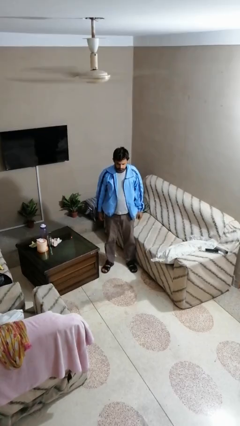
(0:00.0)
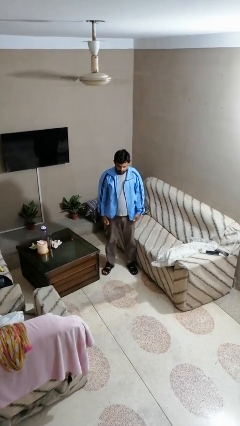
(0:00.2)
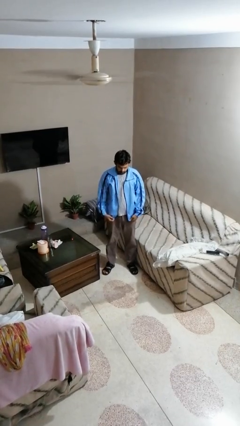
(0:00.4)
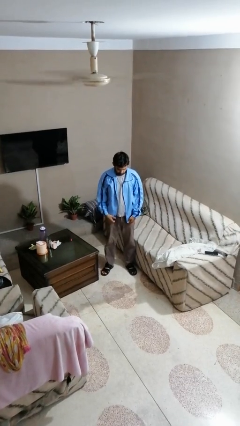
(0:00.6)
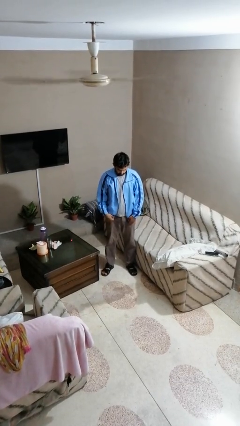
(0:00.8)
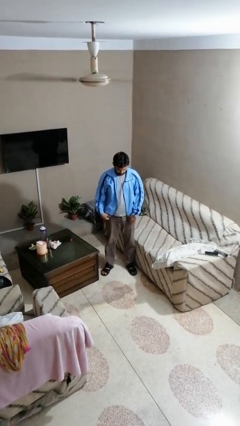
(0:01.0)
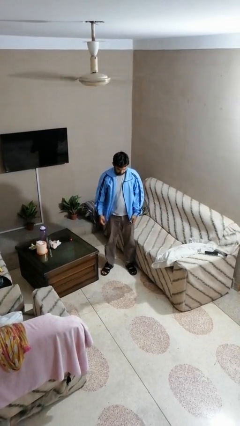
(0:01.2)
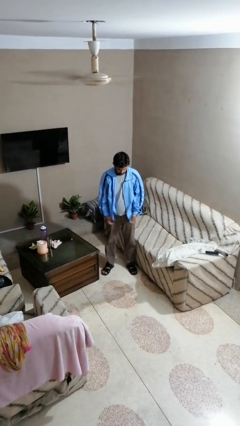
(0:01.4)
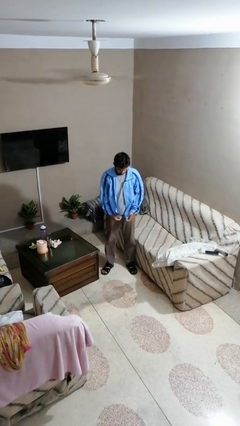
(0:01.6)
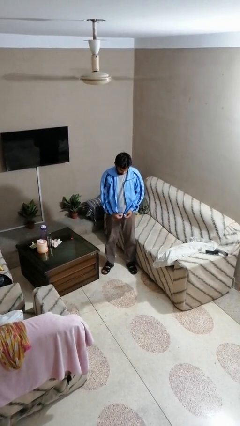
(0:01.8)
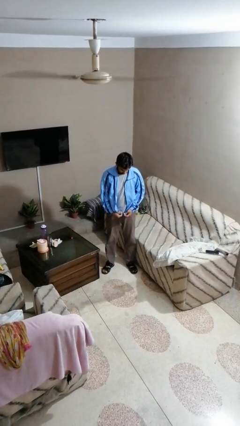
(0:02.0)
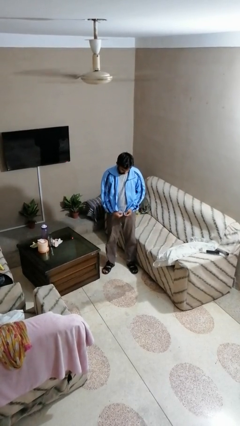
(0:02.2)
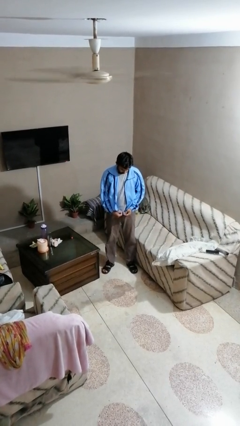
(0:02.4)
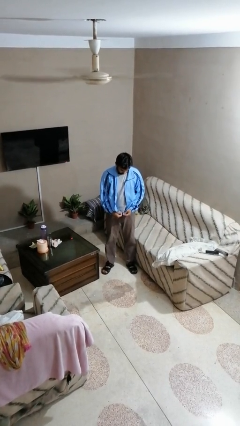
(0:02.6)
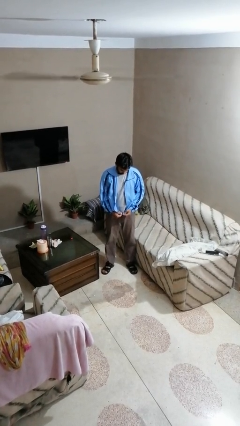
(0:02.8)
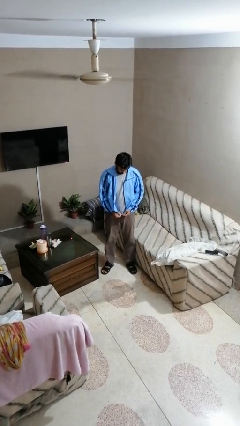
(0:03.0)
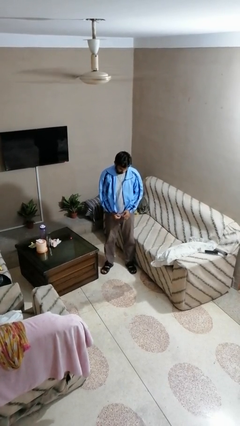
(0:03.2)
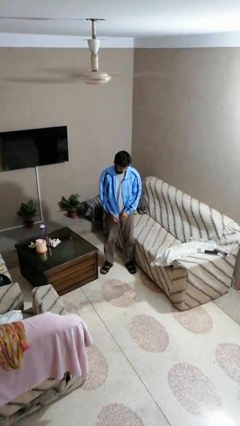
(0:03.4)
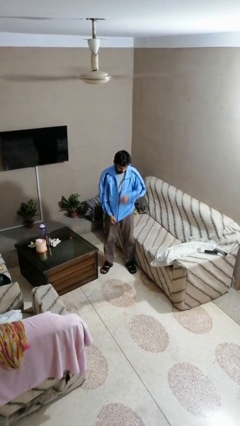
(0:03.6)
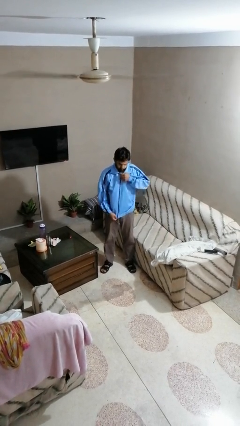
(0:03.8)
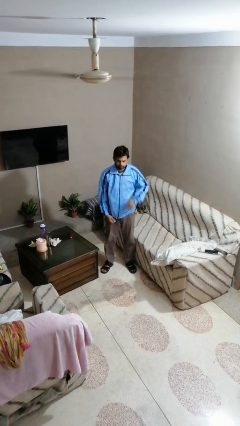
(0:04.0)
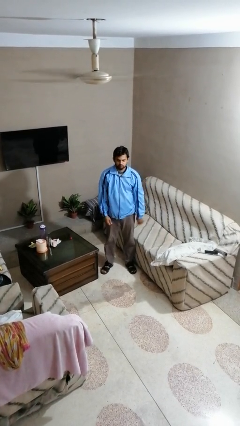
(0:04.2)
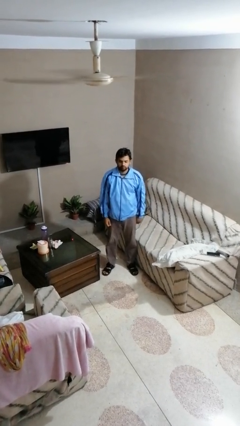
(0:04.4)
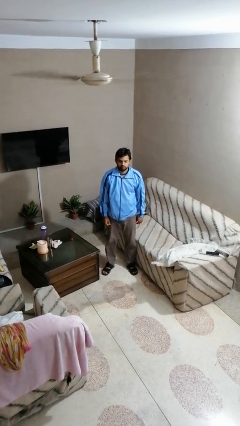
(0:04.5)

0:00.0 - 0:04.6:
person zips up jacket

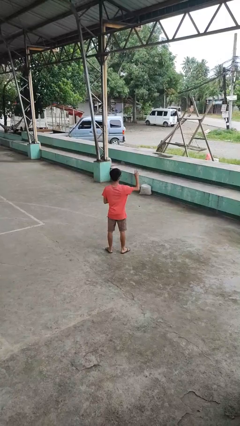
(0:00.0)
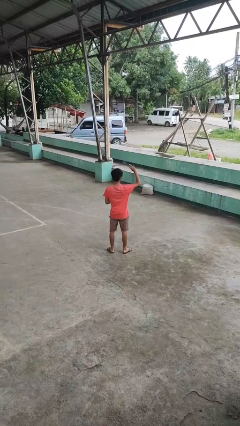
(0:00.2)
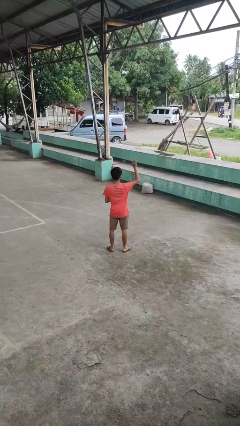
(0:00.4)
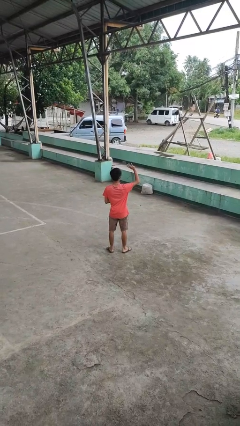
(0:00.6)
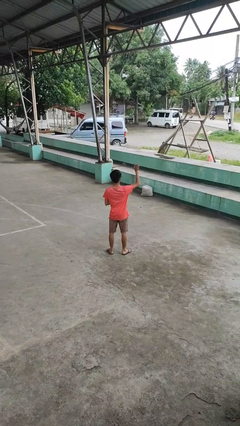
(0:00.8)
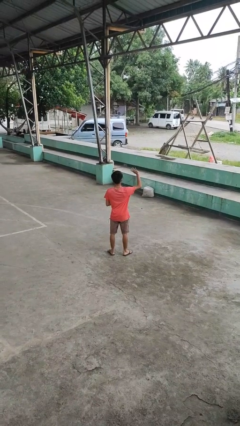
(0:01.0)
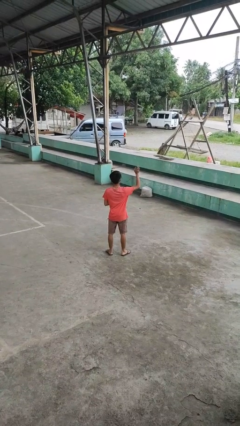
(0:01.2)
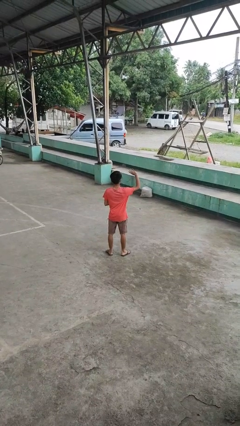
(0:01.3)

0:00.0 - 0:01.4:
person kisses cheek of person

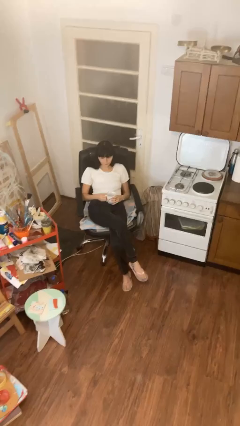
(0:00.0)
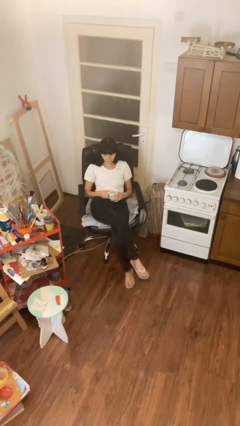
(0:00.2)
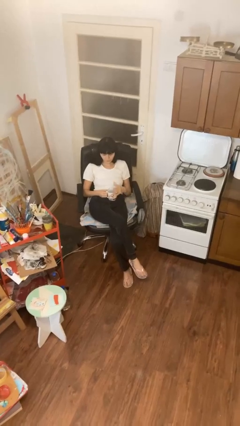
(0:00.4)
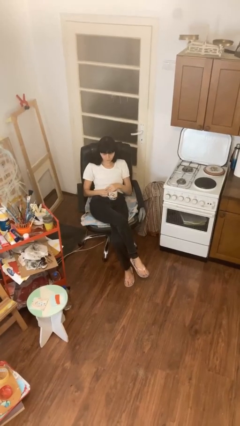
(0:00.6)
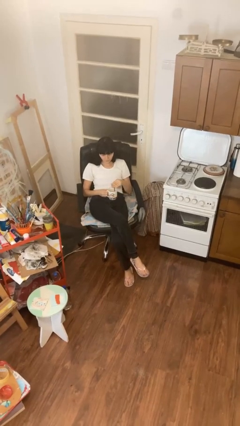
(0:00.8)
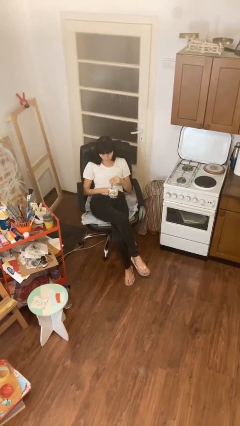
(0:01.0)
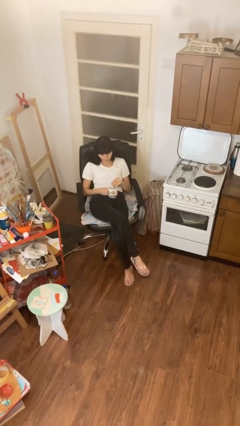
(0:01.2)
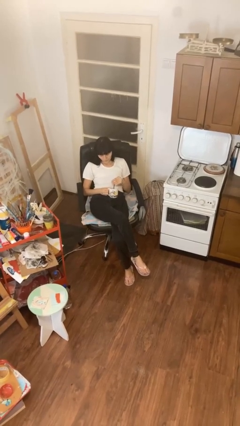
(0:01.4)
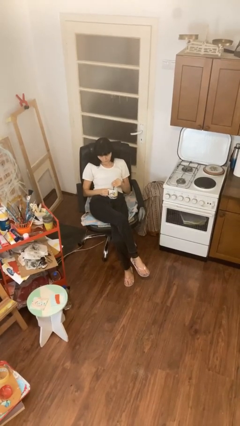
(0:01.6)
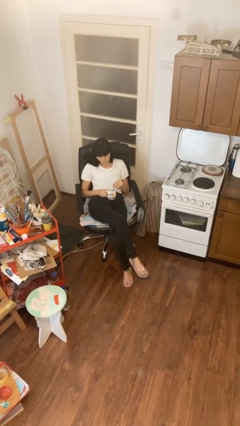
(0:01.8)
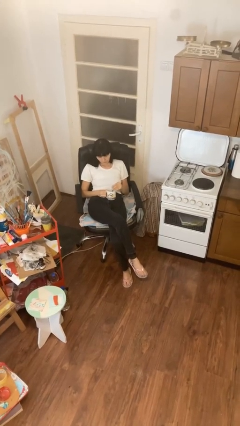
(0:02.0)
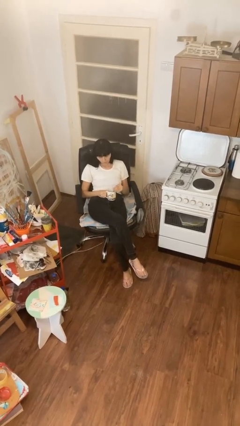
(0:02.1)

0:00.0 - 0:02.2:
person stirs mug

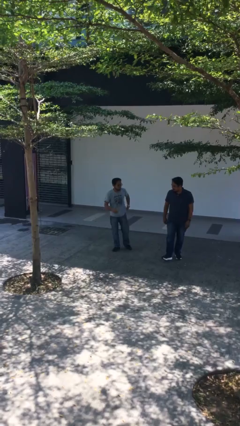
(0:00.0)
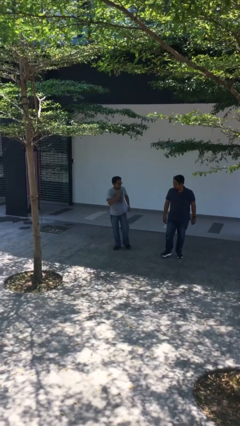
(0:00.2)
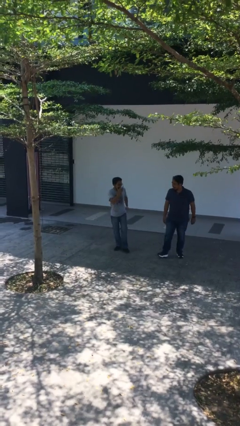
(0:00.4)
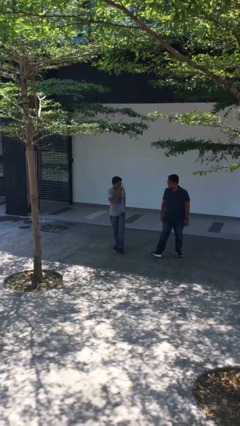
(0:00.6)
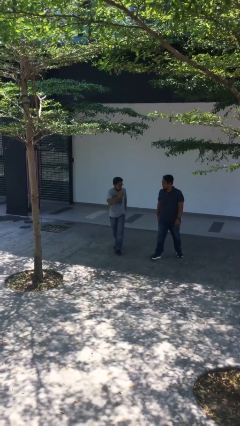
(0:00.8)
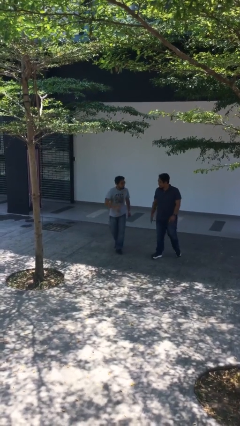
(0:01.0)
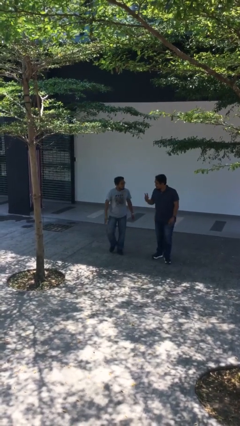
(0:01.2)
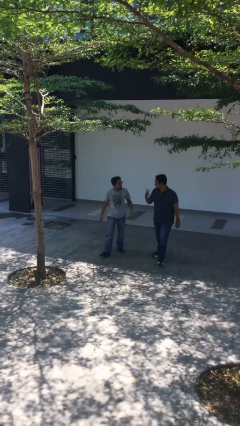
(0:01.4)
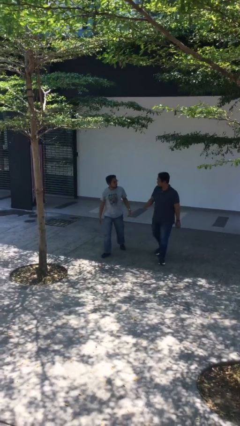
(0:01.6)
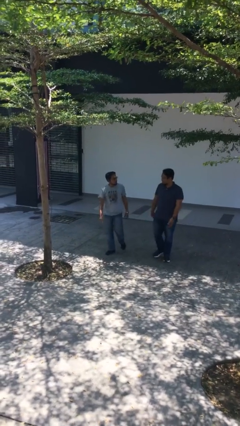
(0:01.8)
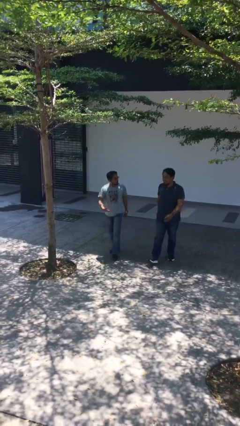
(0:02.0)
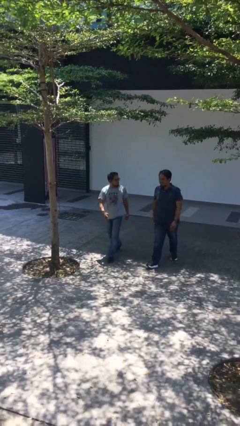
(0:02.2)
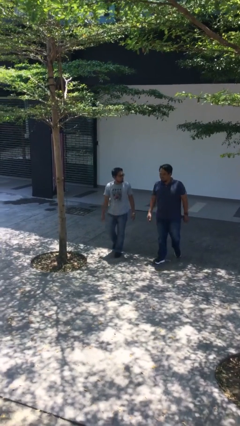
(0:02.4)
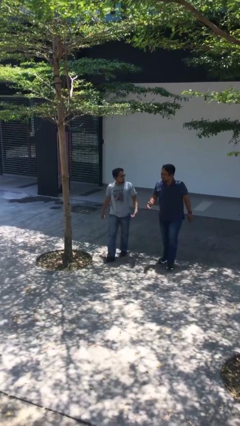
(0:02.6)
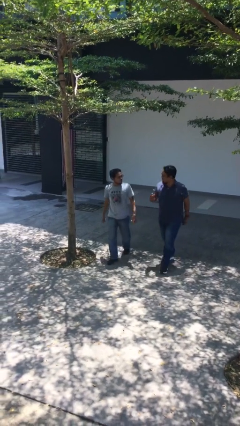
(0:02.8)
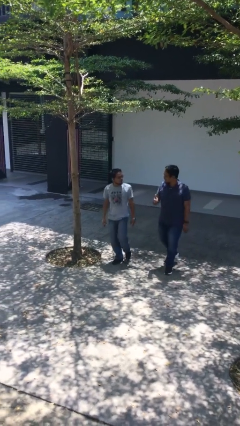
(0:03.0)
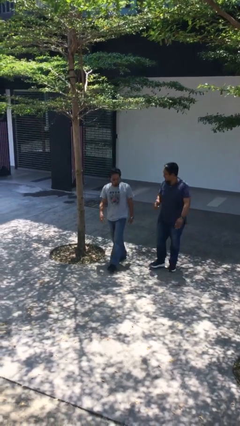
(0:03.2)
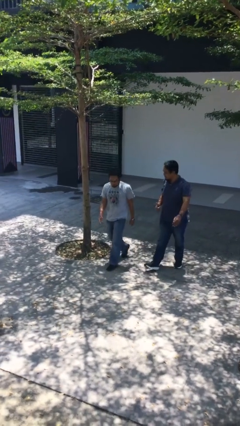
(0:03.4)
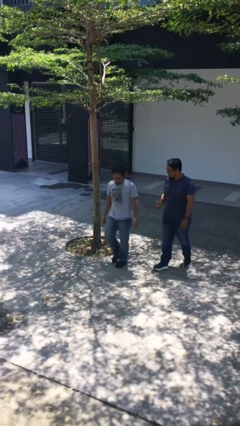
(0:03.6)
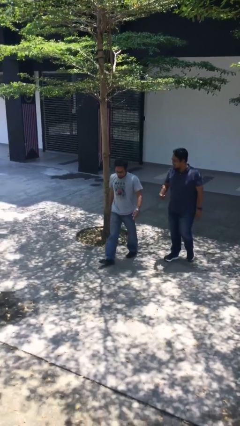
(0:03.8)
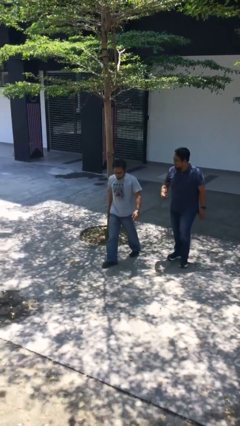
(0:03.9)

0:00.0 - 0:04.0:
person talks to person

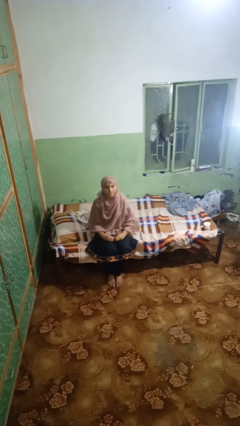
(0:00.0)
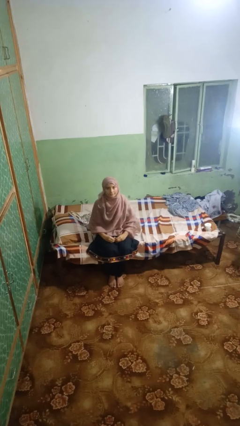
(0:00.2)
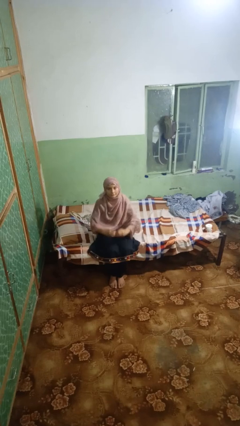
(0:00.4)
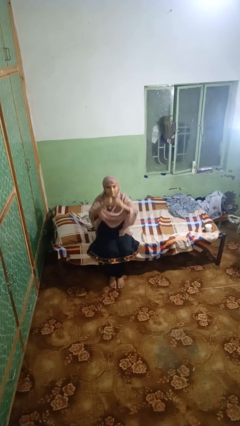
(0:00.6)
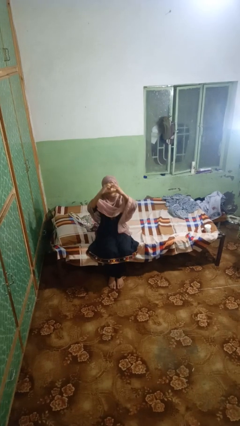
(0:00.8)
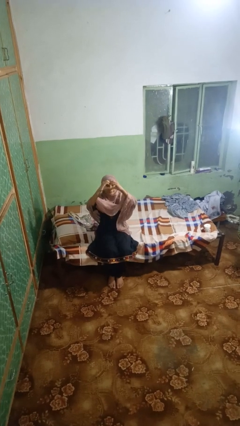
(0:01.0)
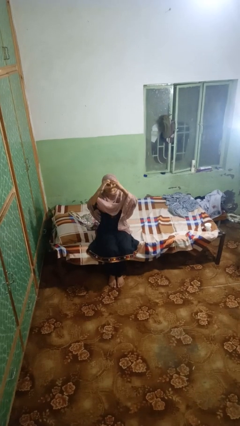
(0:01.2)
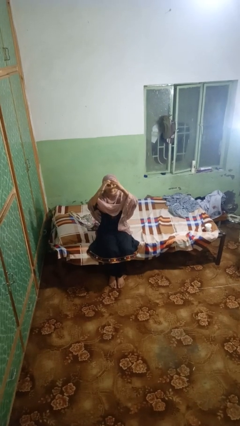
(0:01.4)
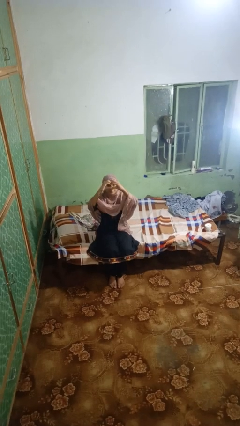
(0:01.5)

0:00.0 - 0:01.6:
person gestures heart

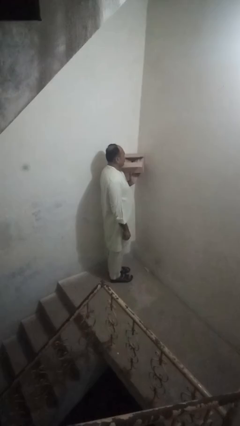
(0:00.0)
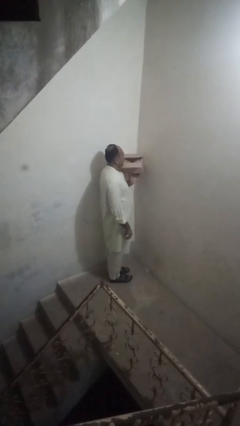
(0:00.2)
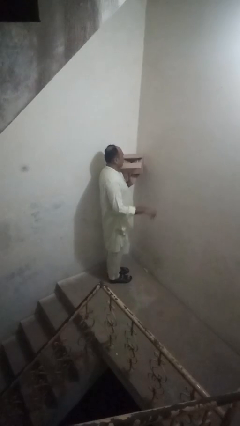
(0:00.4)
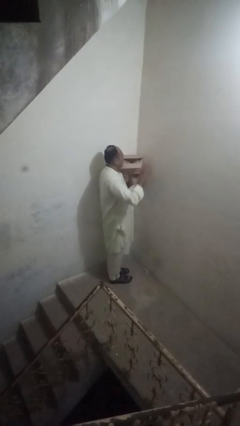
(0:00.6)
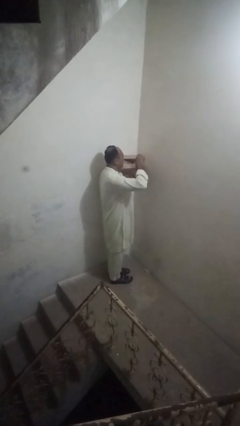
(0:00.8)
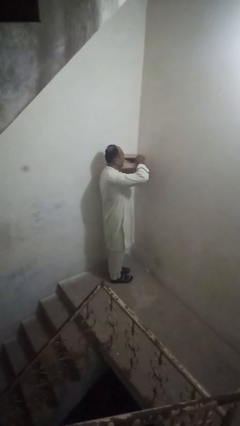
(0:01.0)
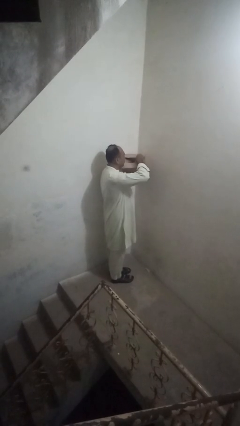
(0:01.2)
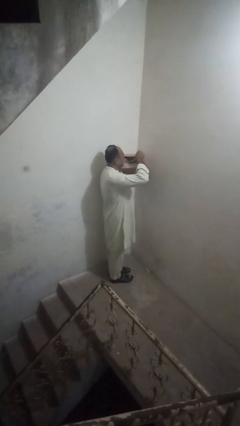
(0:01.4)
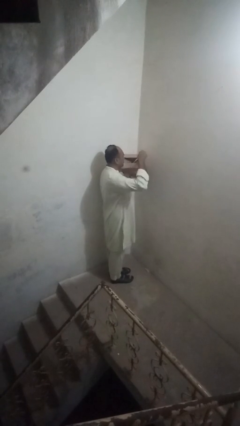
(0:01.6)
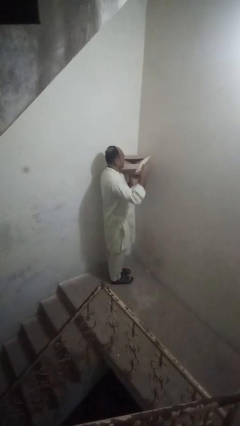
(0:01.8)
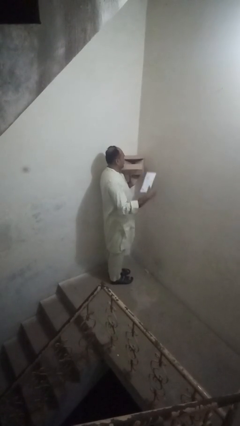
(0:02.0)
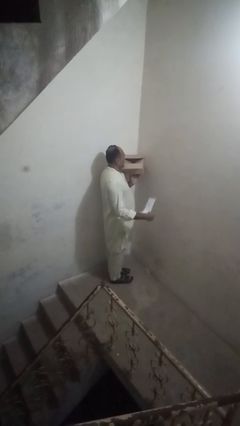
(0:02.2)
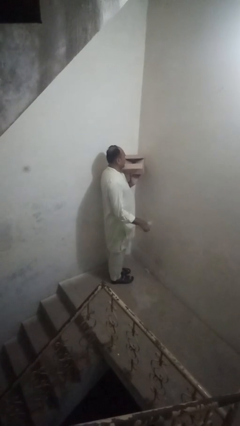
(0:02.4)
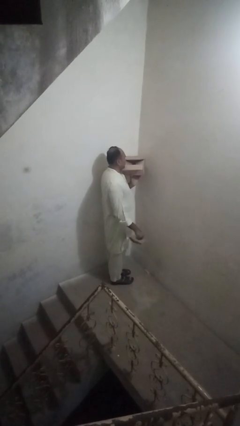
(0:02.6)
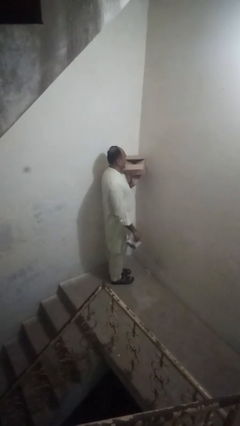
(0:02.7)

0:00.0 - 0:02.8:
person takes letters from mailbox

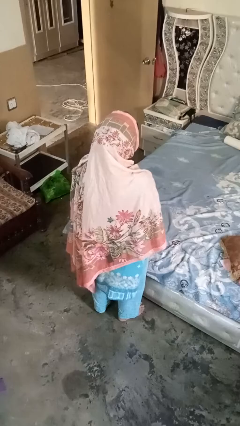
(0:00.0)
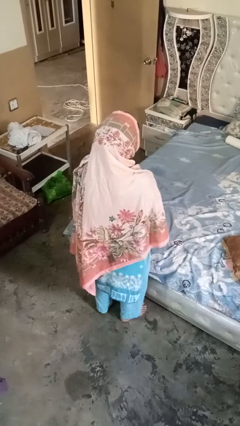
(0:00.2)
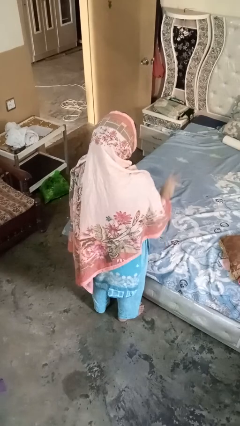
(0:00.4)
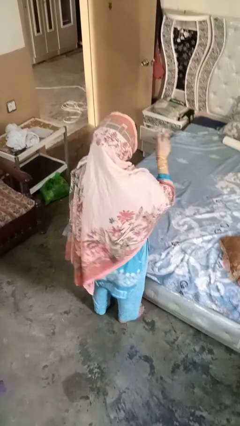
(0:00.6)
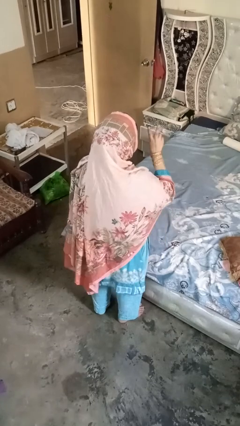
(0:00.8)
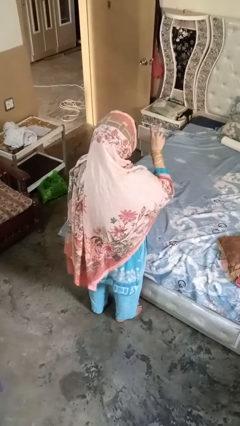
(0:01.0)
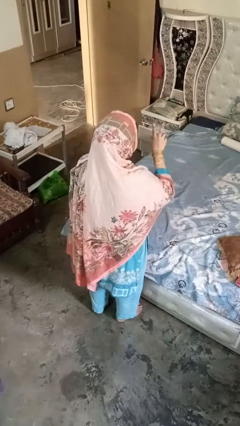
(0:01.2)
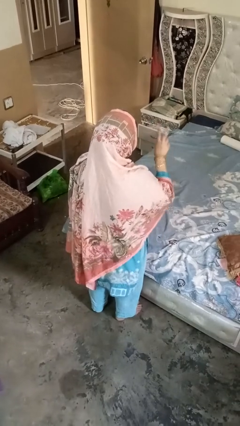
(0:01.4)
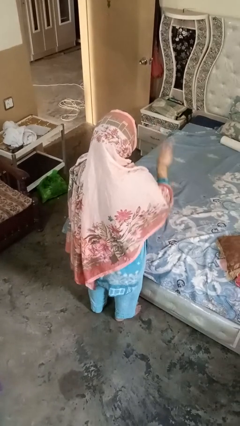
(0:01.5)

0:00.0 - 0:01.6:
person gestures be quiet
